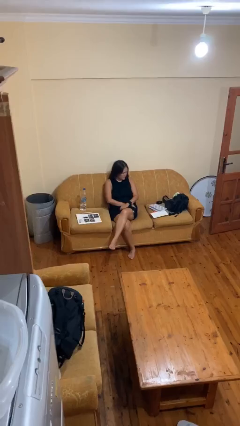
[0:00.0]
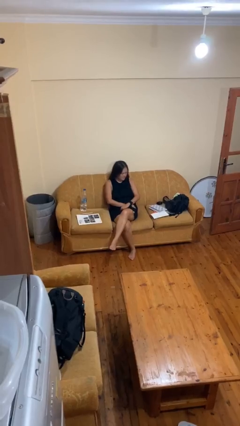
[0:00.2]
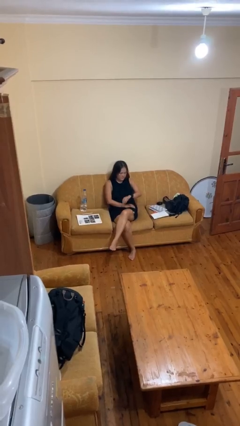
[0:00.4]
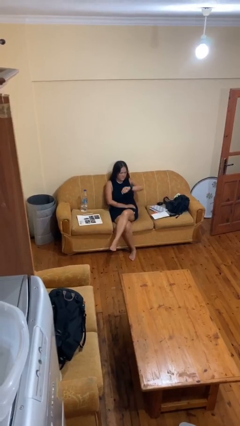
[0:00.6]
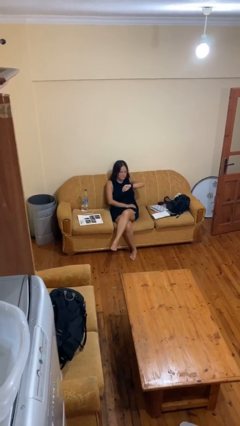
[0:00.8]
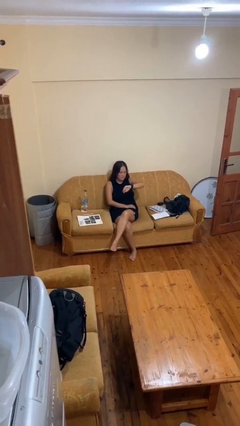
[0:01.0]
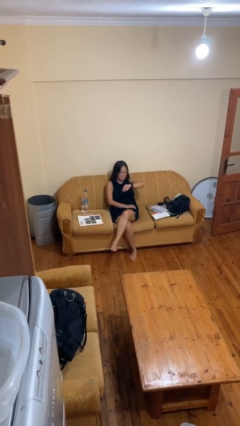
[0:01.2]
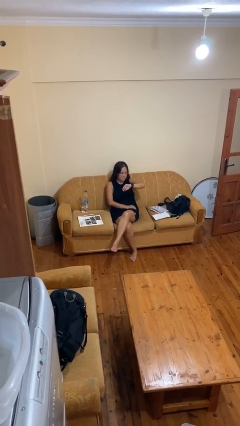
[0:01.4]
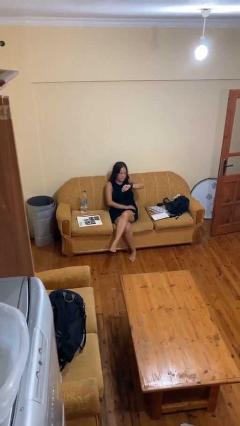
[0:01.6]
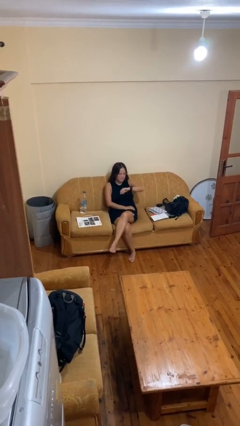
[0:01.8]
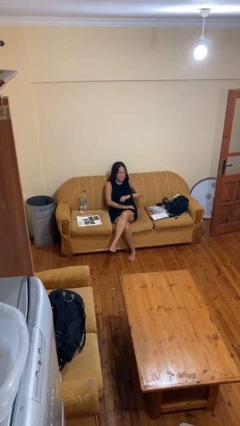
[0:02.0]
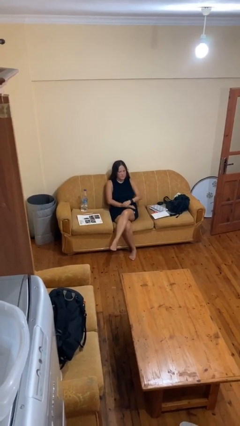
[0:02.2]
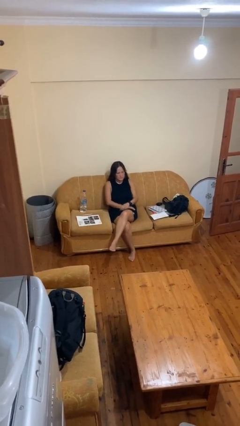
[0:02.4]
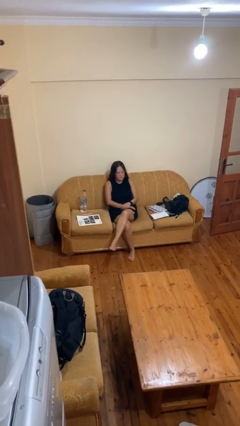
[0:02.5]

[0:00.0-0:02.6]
person looks at wristwatch

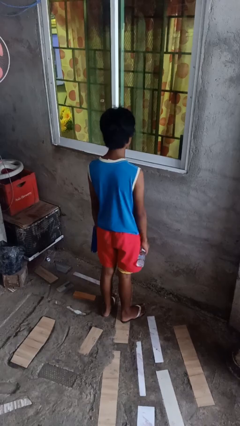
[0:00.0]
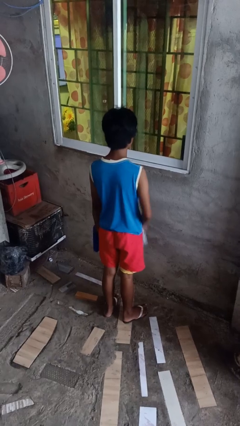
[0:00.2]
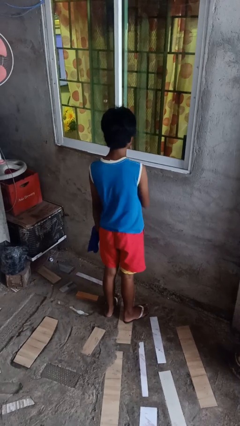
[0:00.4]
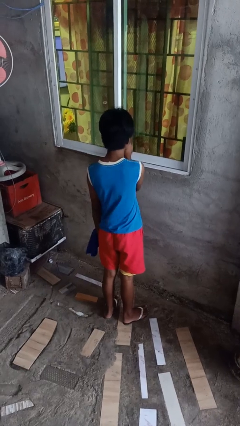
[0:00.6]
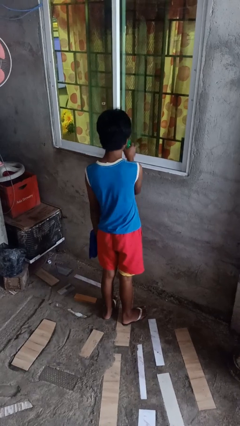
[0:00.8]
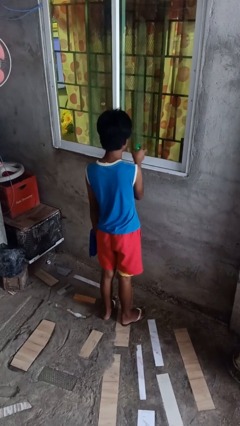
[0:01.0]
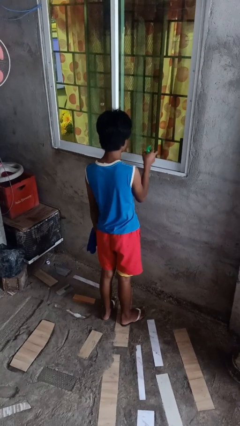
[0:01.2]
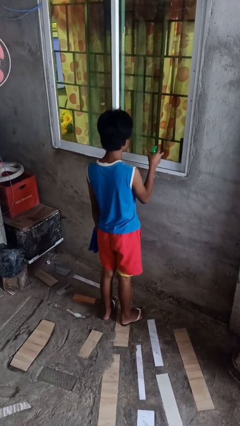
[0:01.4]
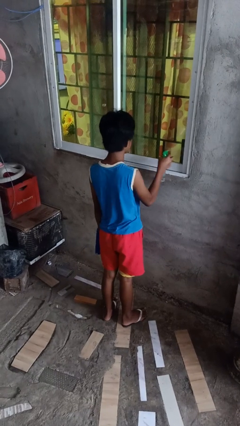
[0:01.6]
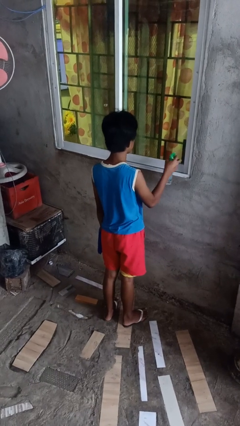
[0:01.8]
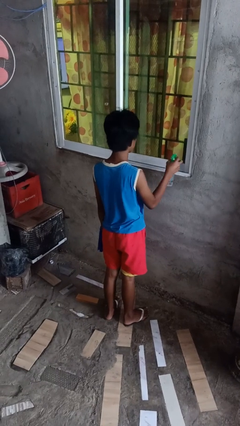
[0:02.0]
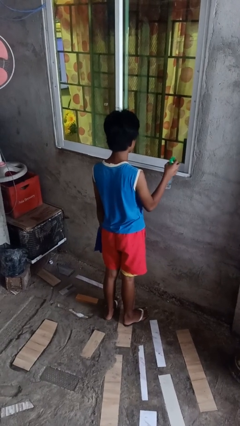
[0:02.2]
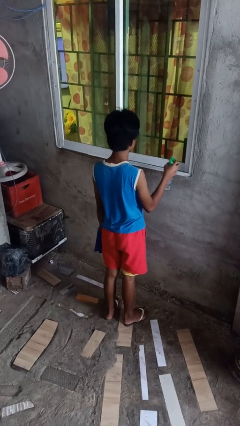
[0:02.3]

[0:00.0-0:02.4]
person sprays from bottle

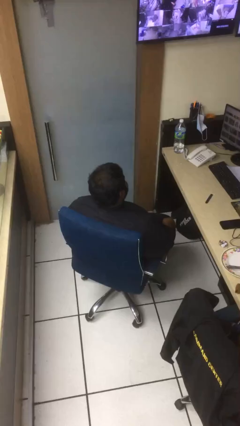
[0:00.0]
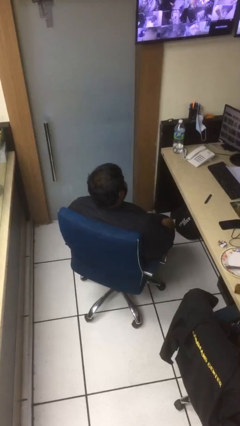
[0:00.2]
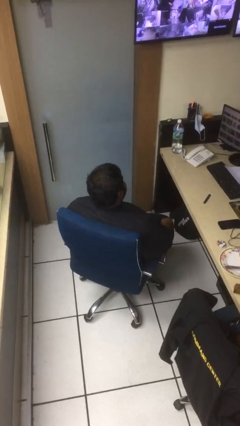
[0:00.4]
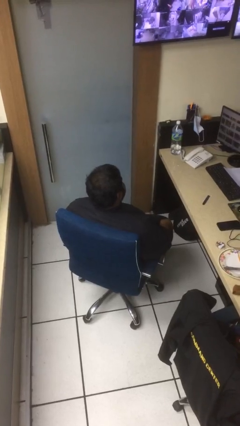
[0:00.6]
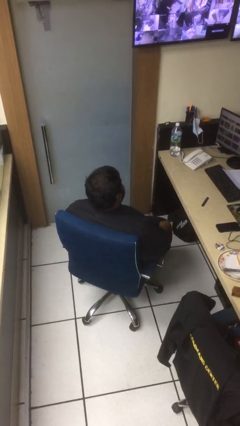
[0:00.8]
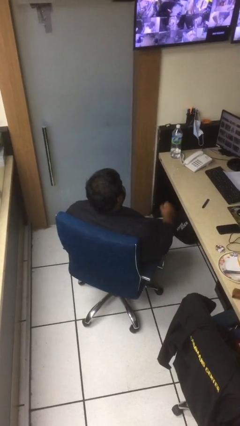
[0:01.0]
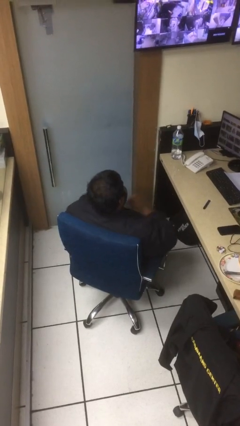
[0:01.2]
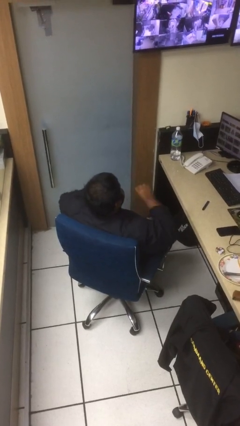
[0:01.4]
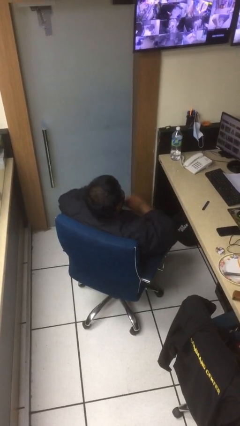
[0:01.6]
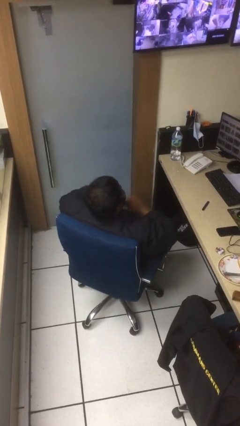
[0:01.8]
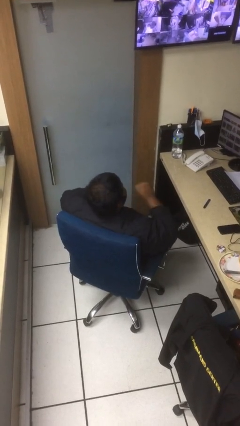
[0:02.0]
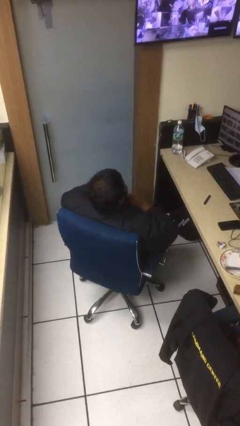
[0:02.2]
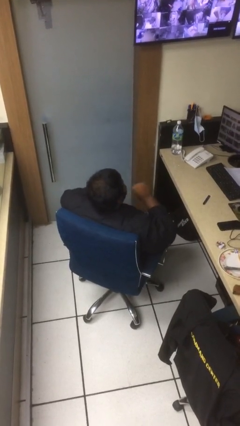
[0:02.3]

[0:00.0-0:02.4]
person drums on chest

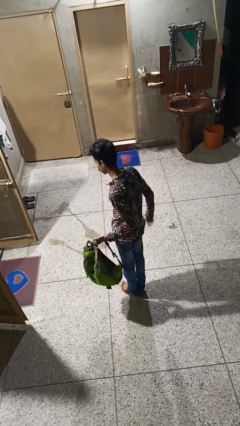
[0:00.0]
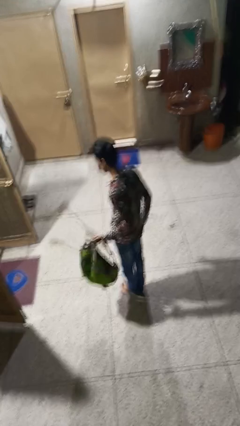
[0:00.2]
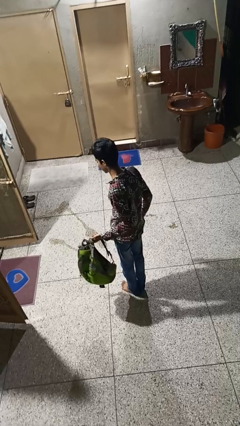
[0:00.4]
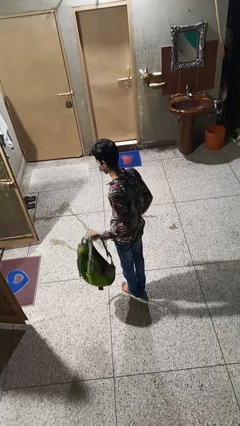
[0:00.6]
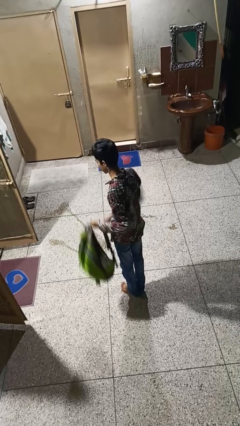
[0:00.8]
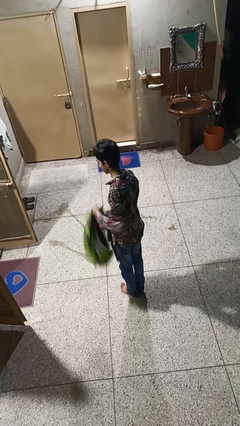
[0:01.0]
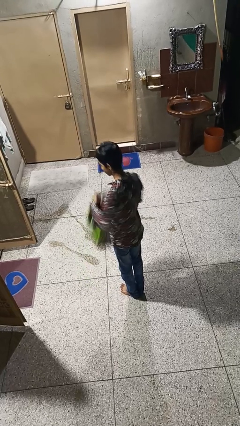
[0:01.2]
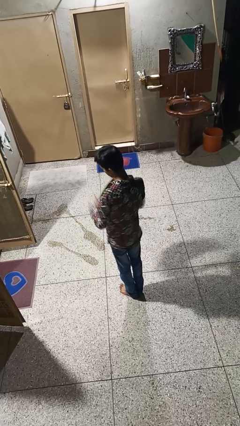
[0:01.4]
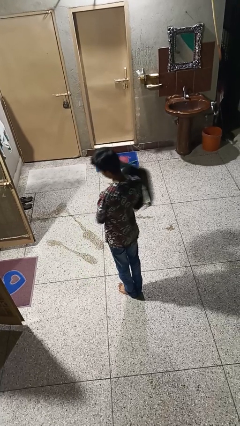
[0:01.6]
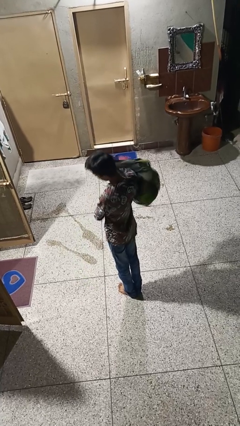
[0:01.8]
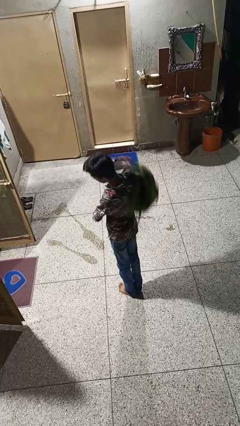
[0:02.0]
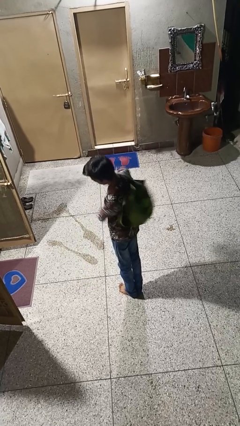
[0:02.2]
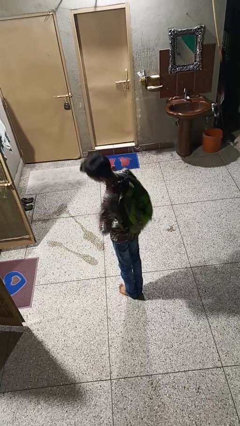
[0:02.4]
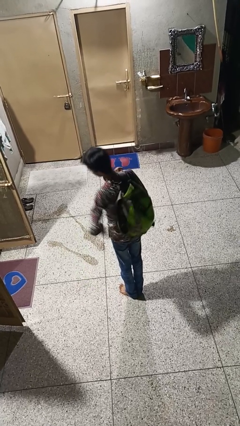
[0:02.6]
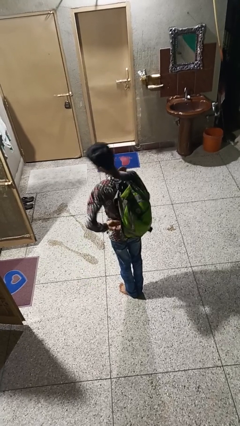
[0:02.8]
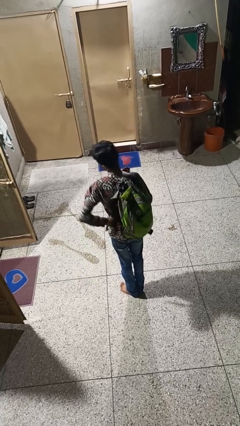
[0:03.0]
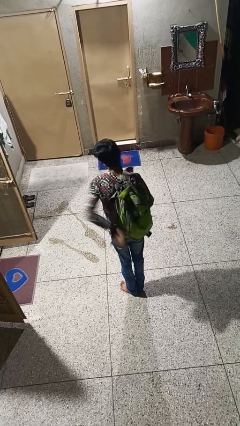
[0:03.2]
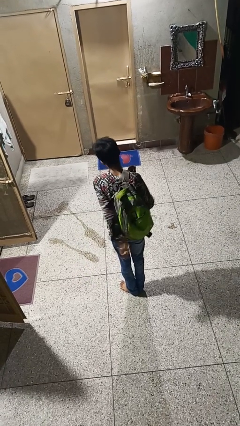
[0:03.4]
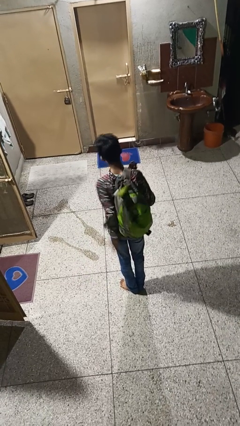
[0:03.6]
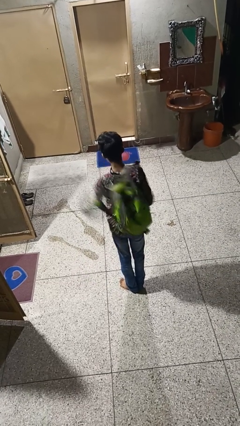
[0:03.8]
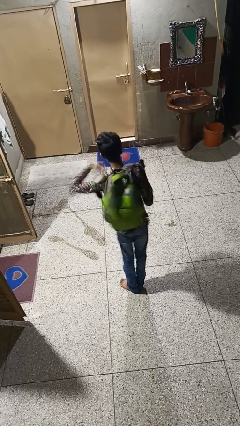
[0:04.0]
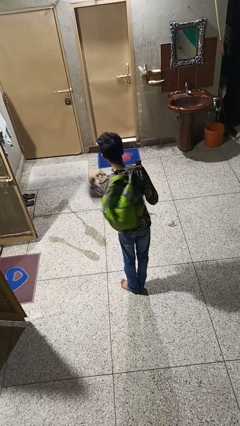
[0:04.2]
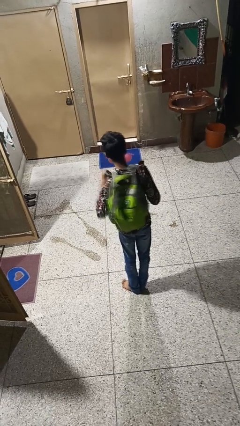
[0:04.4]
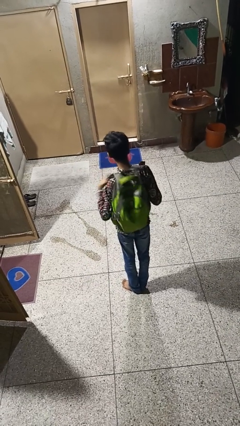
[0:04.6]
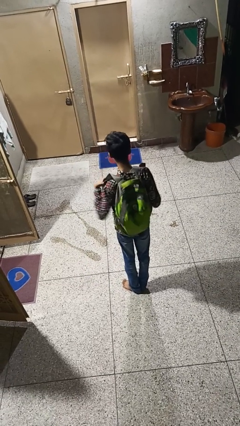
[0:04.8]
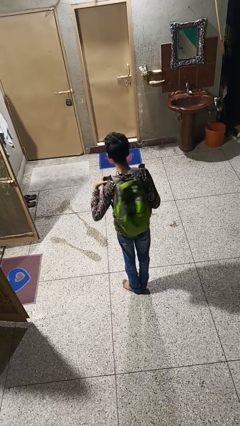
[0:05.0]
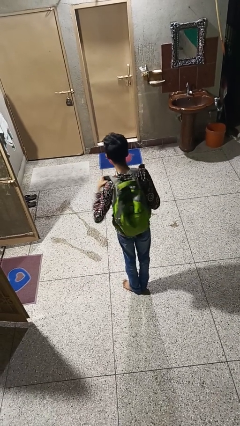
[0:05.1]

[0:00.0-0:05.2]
person puts on backpack

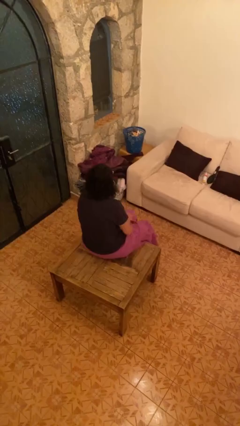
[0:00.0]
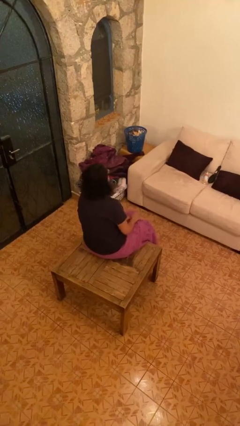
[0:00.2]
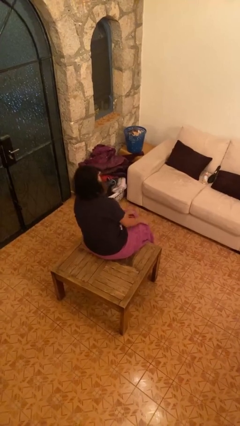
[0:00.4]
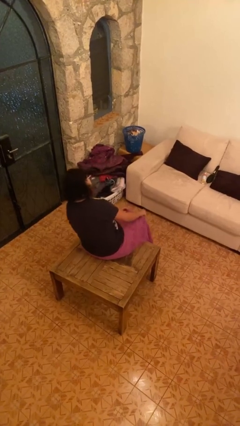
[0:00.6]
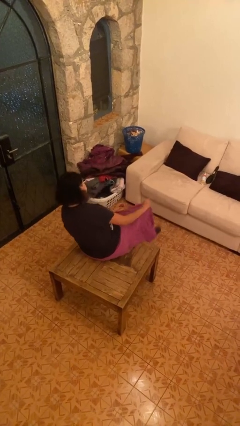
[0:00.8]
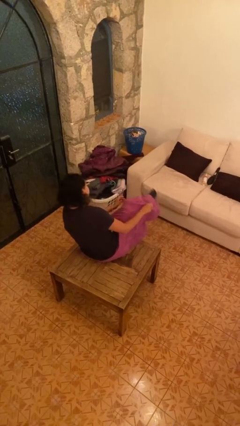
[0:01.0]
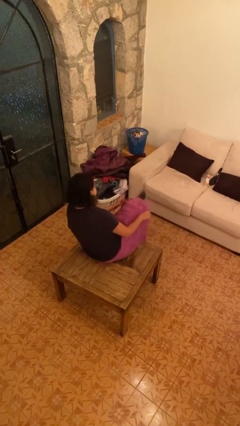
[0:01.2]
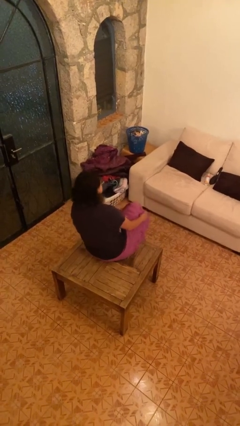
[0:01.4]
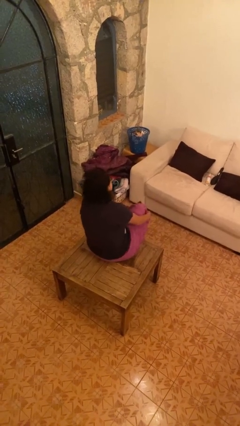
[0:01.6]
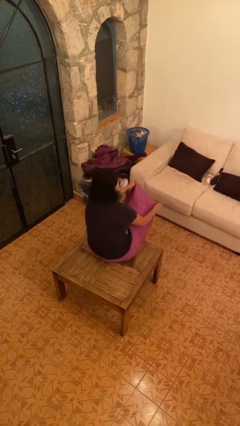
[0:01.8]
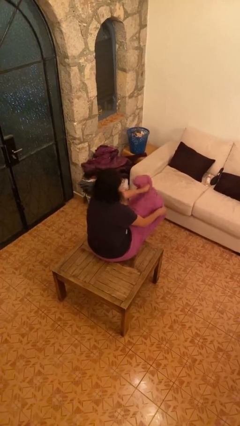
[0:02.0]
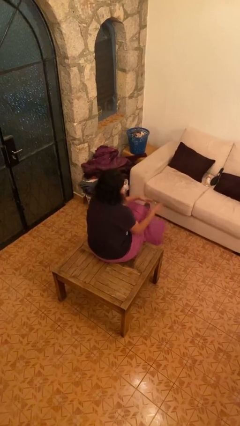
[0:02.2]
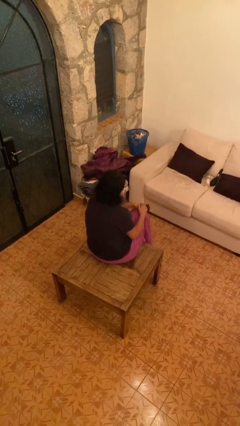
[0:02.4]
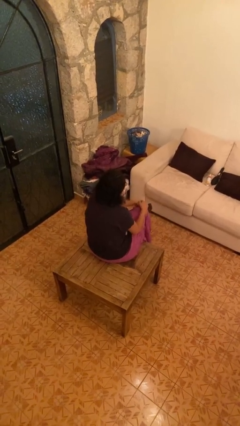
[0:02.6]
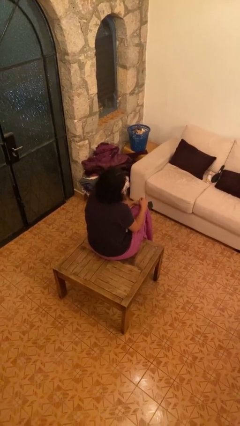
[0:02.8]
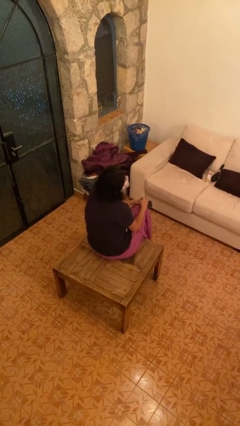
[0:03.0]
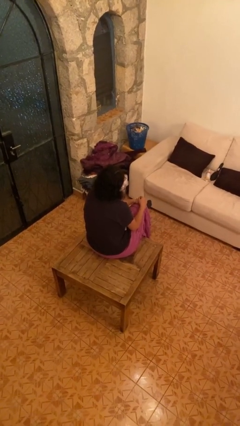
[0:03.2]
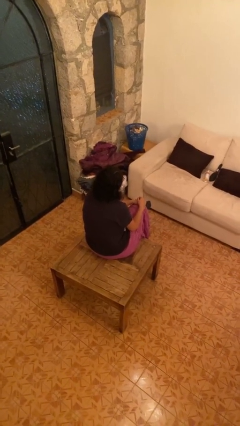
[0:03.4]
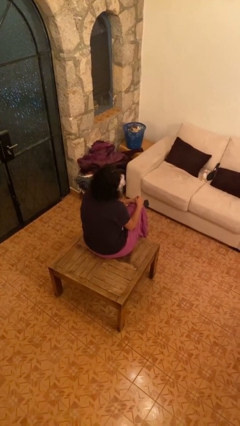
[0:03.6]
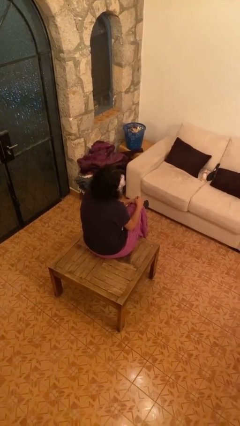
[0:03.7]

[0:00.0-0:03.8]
person crosses legs

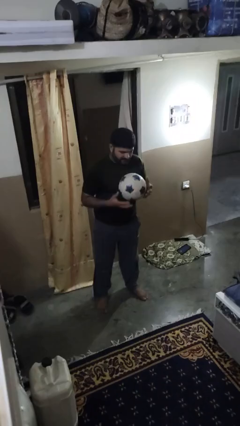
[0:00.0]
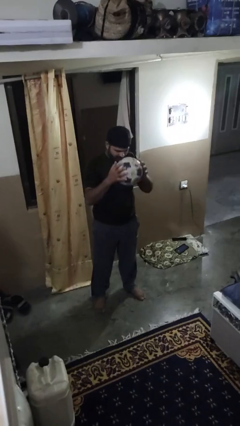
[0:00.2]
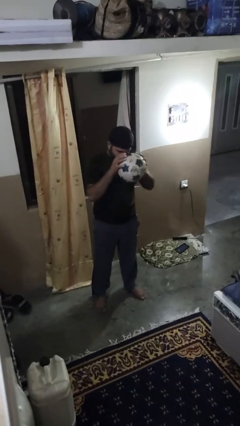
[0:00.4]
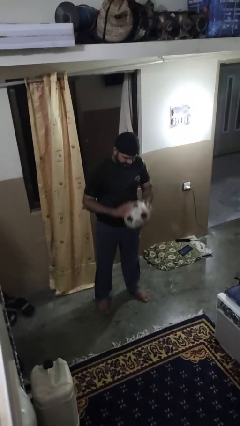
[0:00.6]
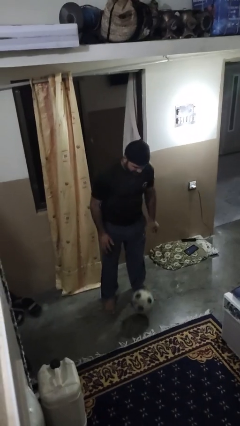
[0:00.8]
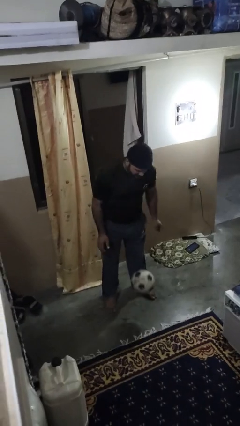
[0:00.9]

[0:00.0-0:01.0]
person bounces ball on floor
